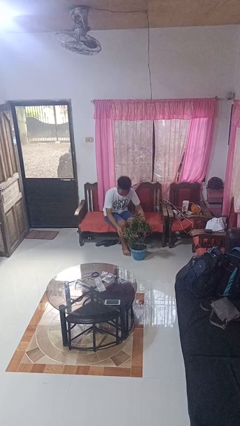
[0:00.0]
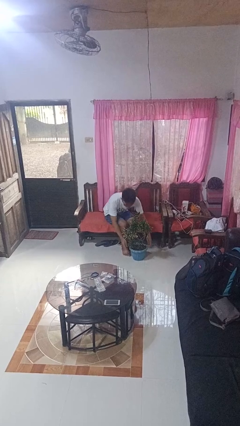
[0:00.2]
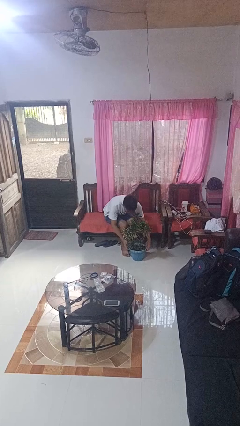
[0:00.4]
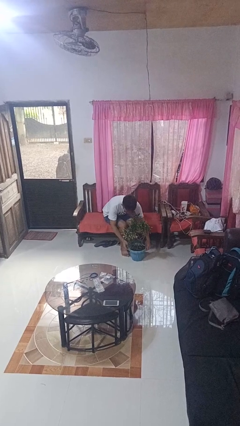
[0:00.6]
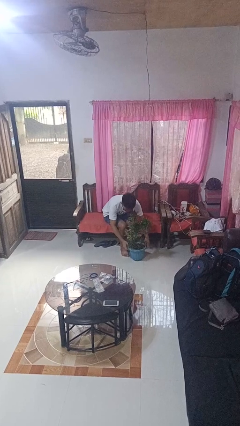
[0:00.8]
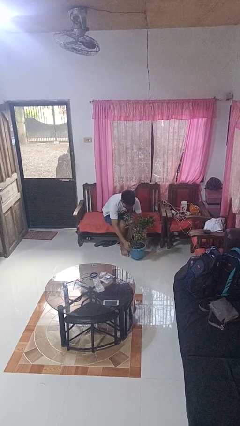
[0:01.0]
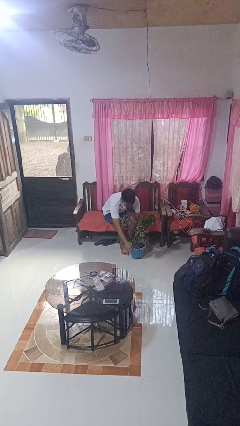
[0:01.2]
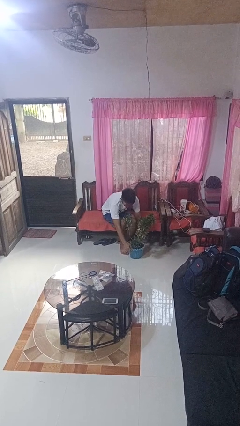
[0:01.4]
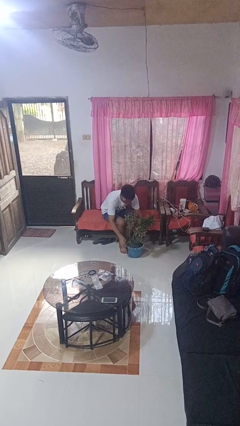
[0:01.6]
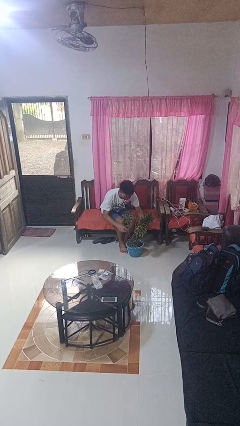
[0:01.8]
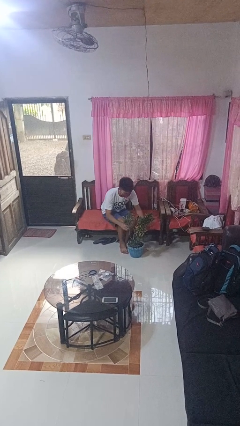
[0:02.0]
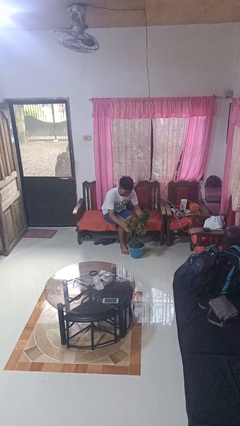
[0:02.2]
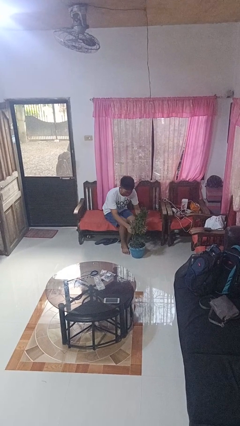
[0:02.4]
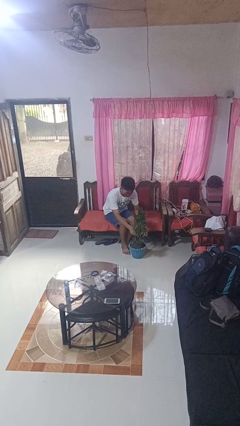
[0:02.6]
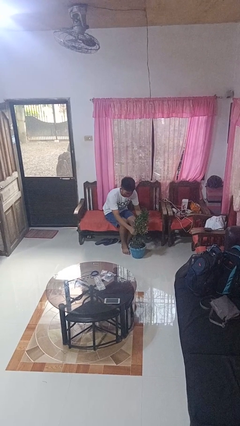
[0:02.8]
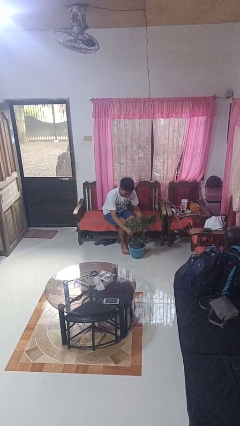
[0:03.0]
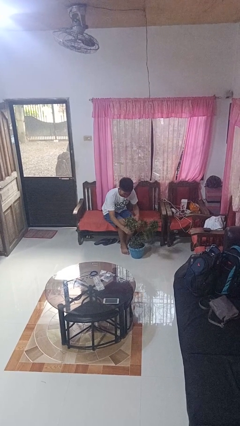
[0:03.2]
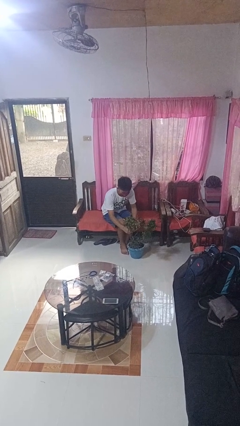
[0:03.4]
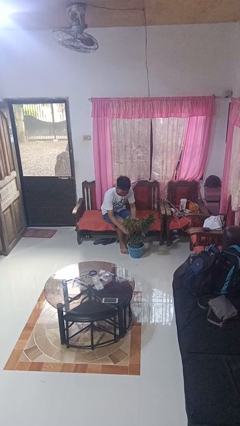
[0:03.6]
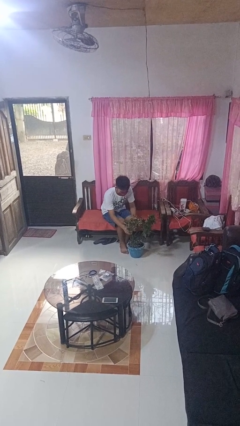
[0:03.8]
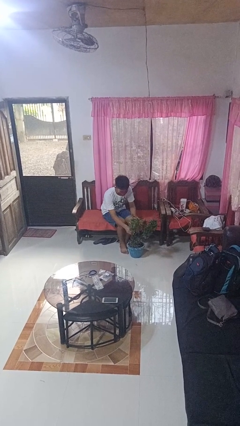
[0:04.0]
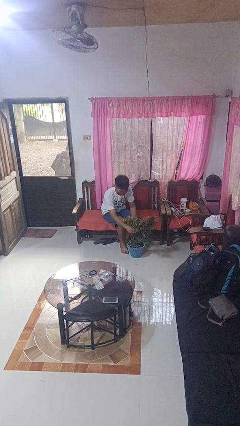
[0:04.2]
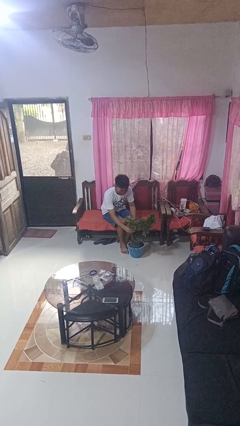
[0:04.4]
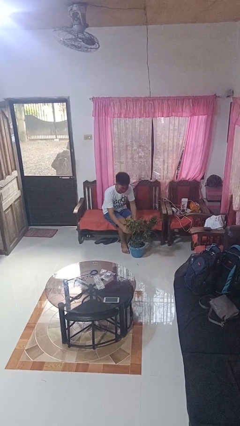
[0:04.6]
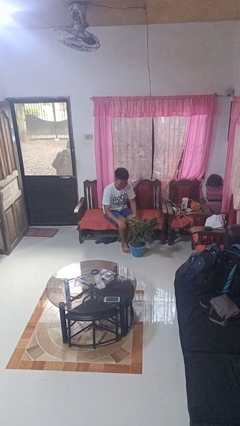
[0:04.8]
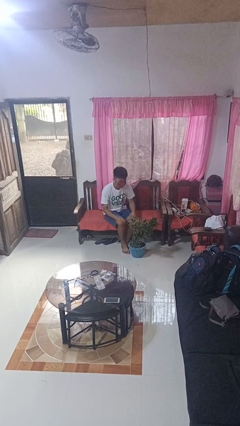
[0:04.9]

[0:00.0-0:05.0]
person arranges flowers in vase

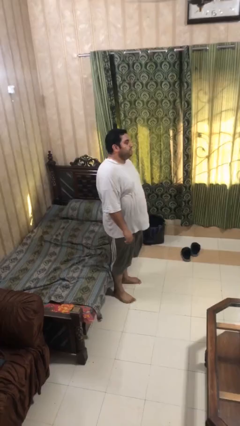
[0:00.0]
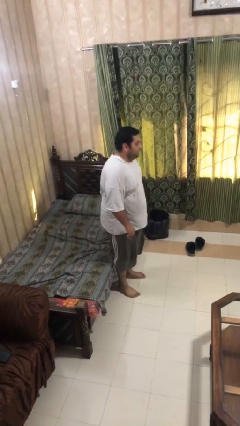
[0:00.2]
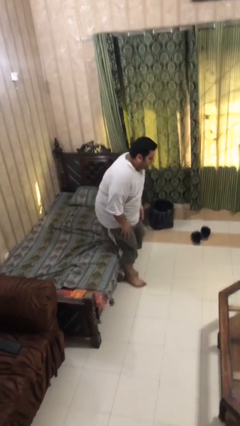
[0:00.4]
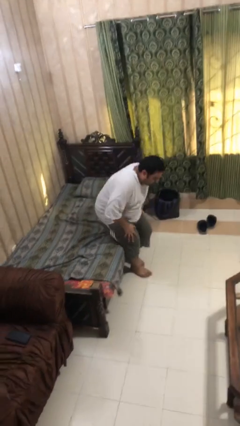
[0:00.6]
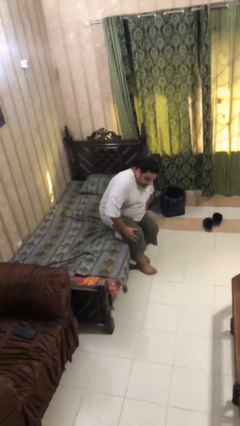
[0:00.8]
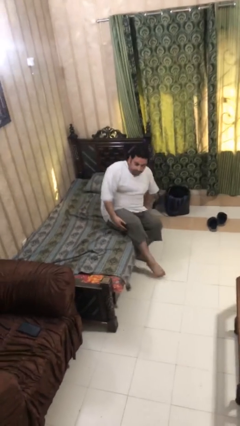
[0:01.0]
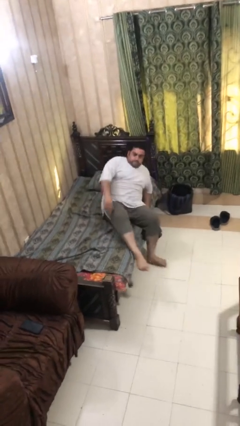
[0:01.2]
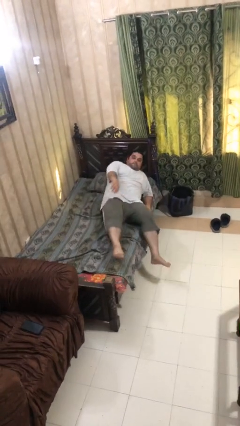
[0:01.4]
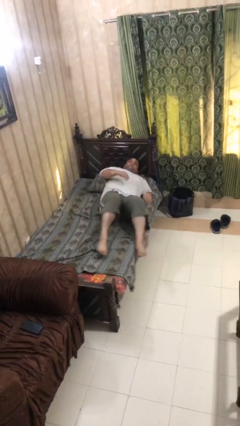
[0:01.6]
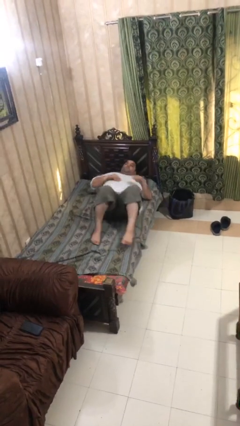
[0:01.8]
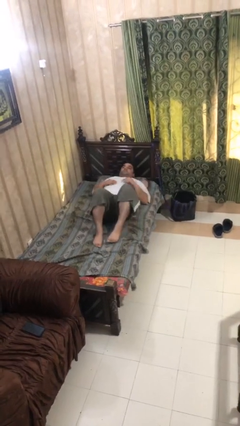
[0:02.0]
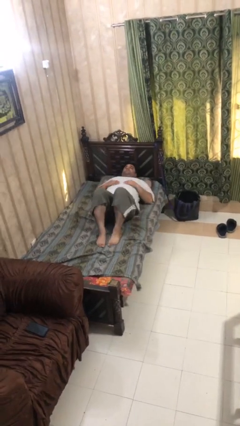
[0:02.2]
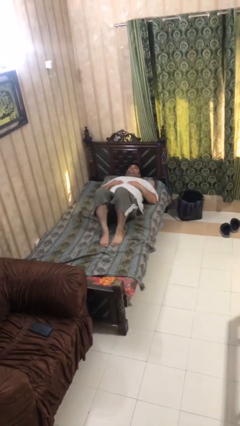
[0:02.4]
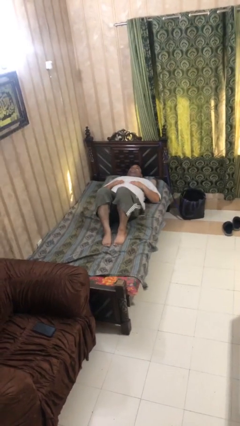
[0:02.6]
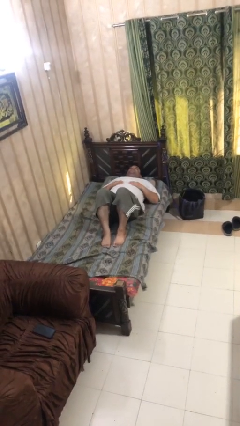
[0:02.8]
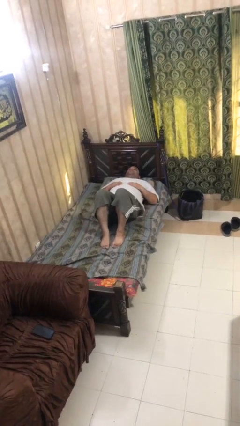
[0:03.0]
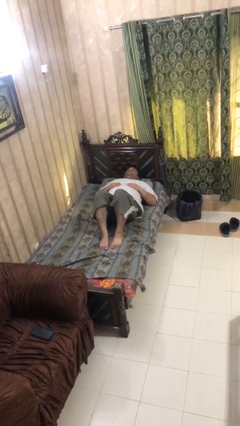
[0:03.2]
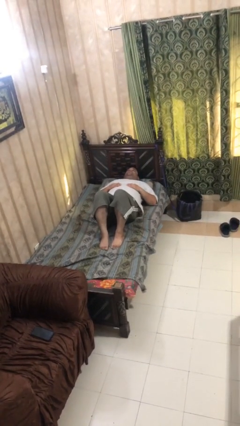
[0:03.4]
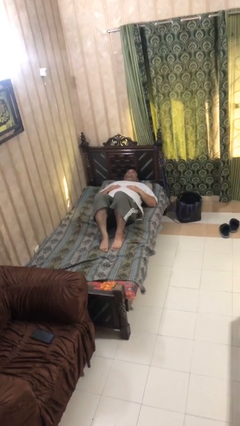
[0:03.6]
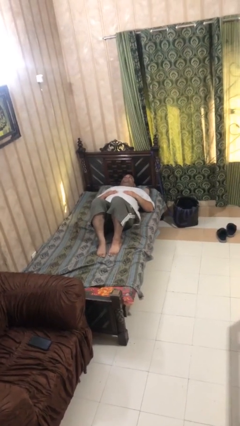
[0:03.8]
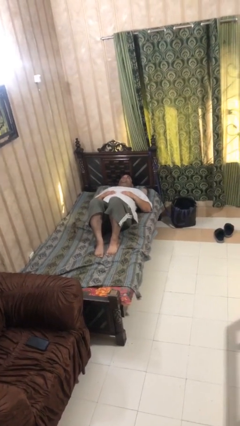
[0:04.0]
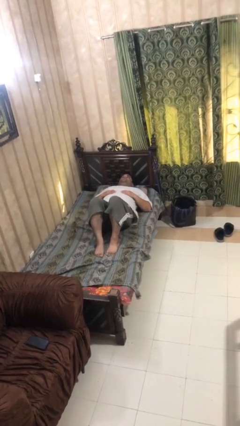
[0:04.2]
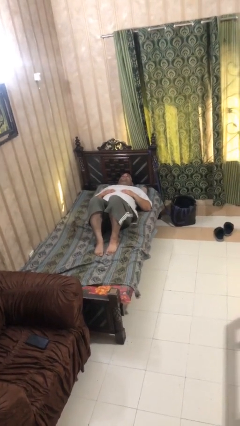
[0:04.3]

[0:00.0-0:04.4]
person lies down on bed

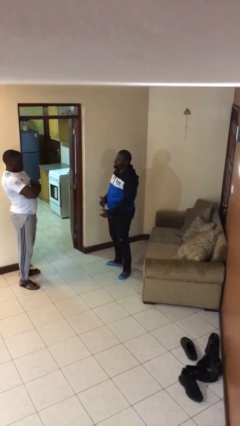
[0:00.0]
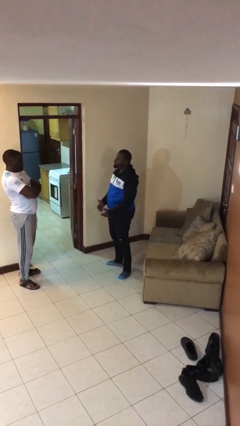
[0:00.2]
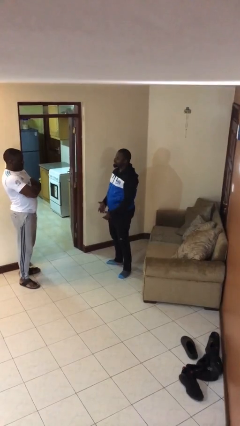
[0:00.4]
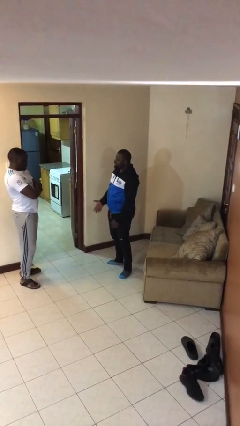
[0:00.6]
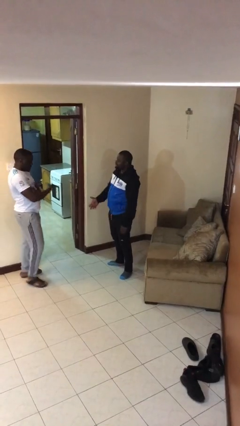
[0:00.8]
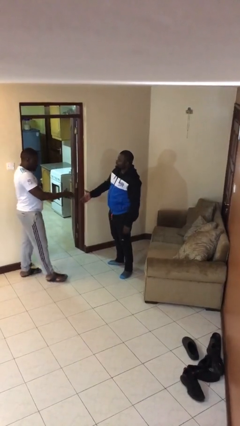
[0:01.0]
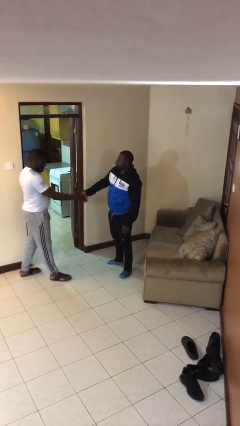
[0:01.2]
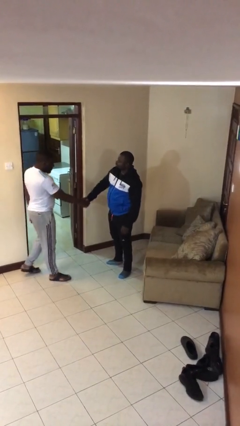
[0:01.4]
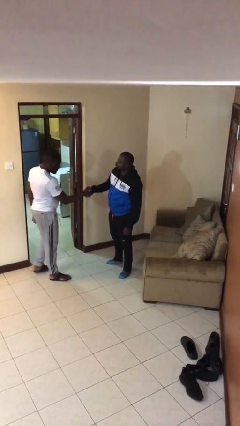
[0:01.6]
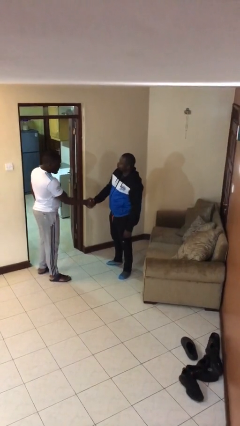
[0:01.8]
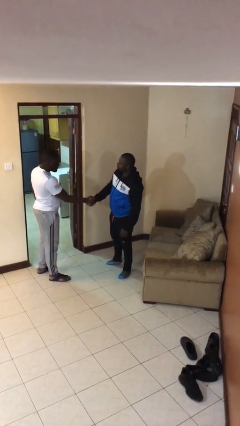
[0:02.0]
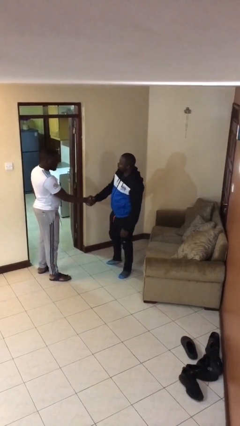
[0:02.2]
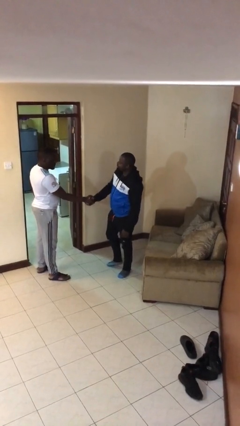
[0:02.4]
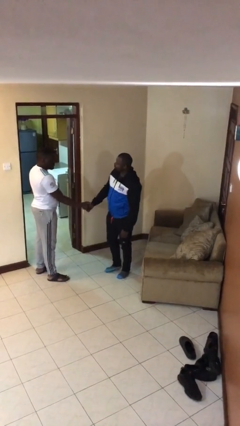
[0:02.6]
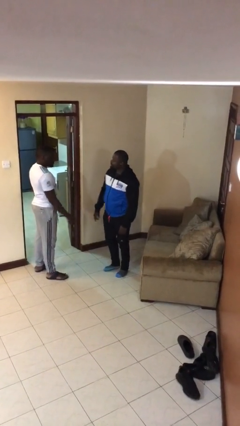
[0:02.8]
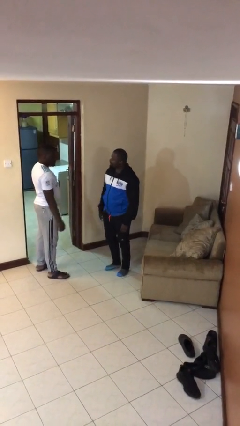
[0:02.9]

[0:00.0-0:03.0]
person shakes hand

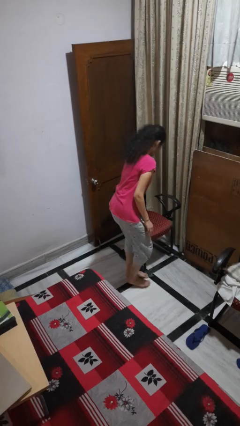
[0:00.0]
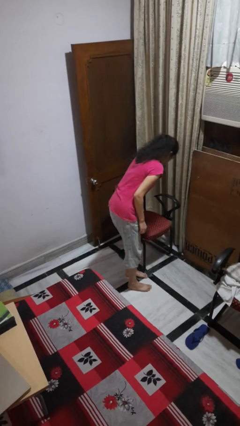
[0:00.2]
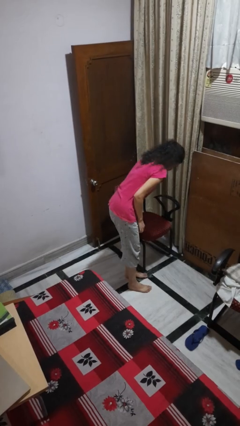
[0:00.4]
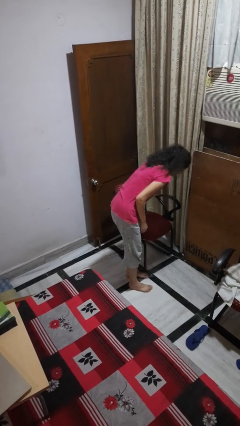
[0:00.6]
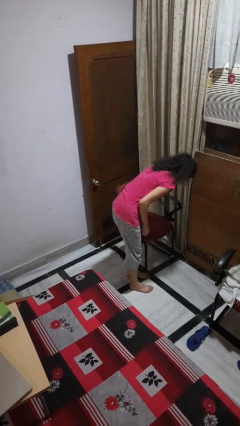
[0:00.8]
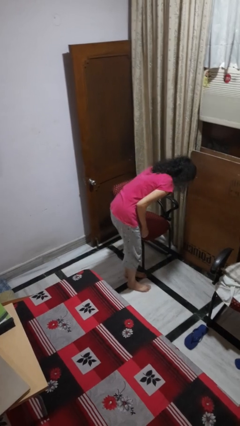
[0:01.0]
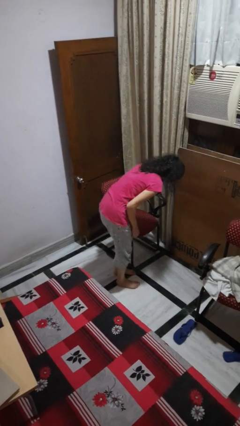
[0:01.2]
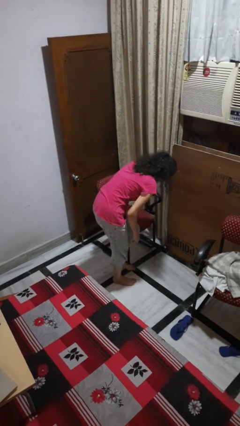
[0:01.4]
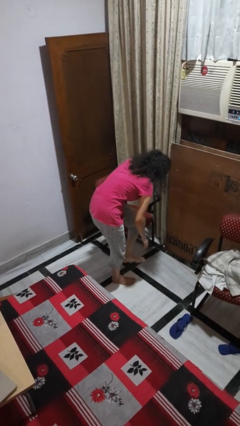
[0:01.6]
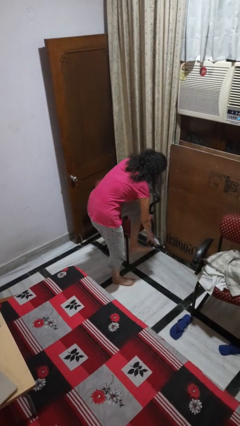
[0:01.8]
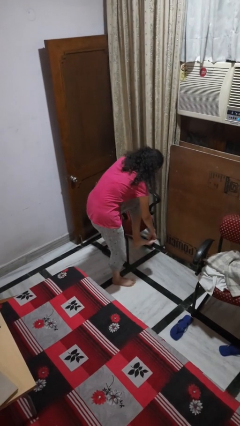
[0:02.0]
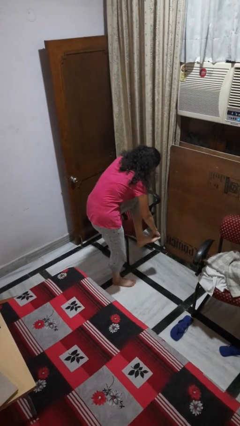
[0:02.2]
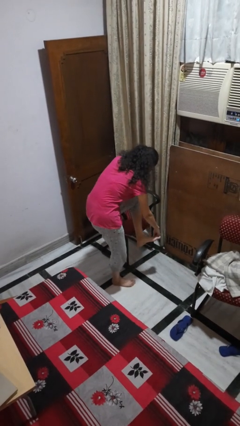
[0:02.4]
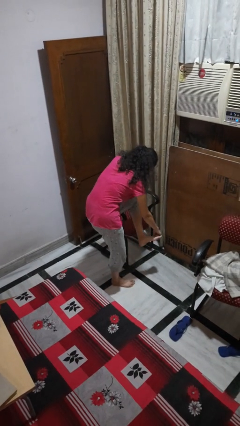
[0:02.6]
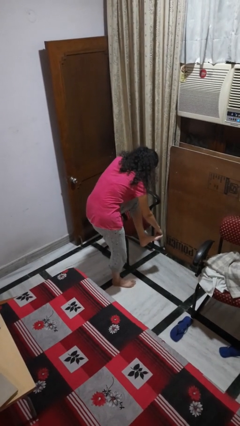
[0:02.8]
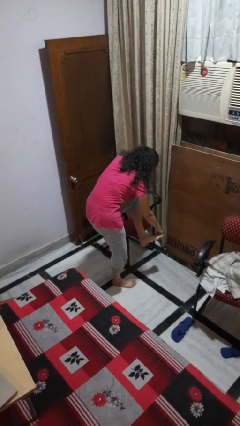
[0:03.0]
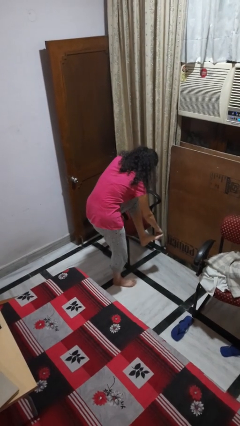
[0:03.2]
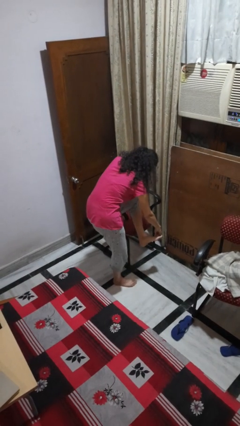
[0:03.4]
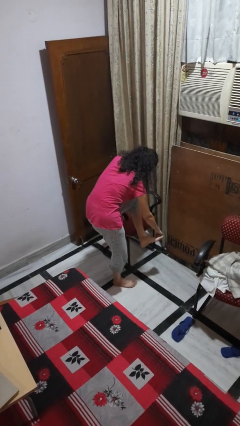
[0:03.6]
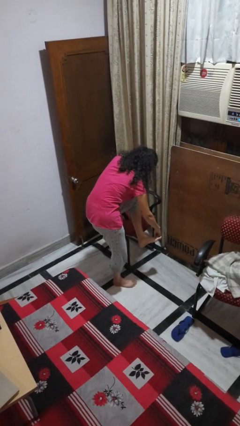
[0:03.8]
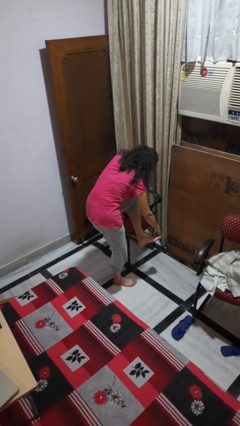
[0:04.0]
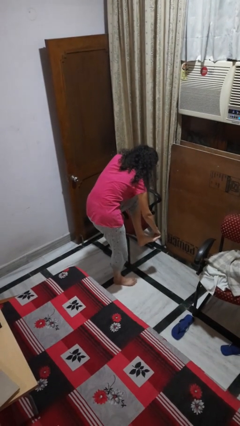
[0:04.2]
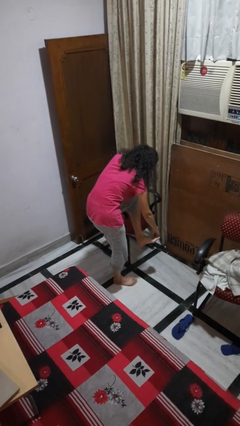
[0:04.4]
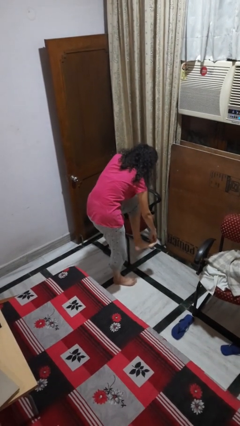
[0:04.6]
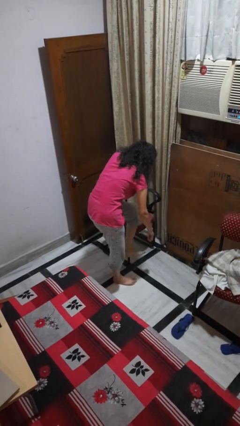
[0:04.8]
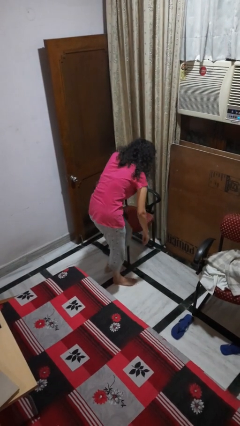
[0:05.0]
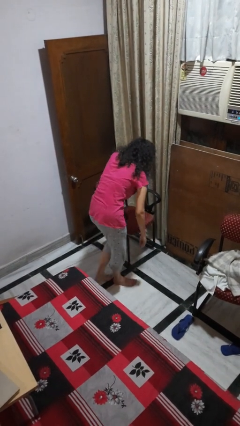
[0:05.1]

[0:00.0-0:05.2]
person stubs toe

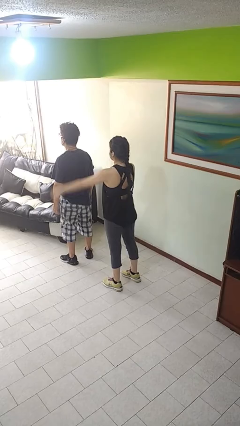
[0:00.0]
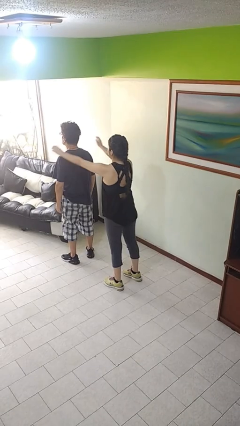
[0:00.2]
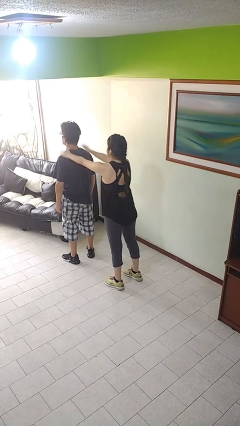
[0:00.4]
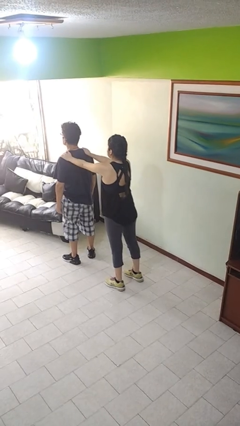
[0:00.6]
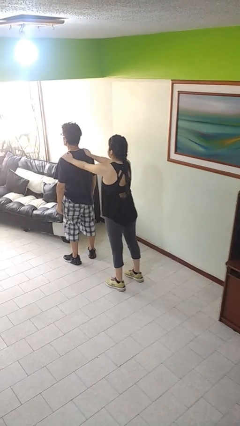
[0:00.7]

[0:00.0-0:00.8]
person grabs person by shoulder
